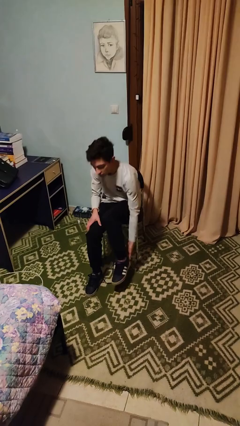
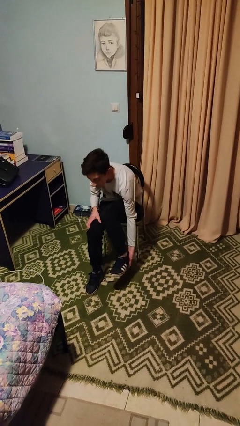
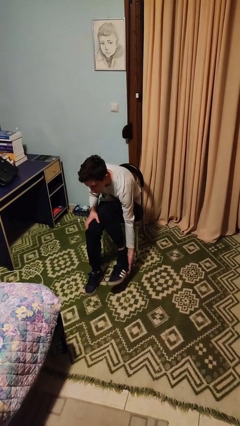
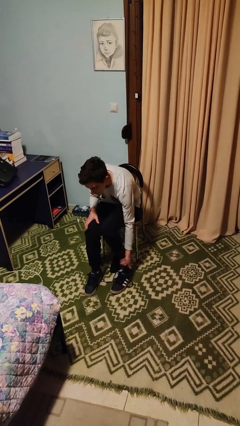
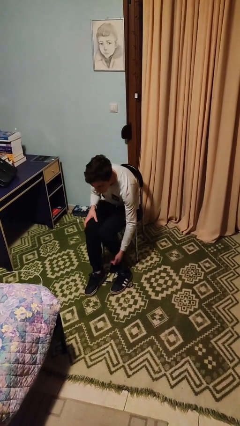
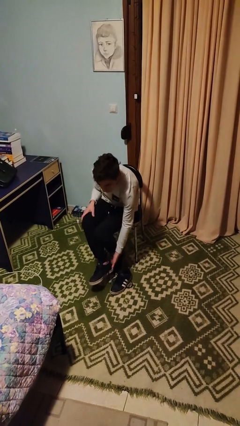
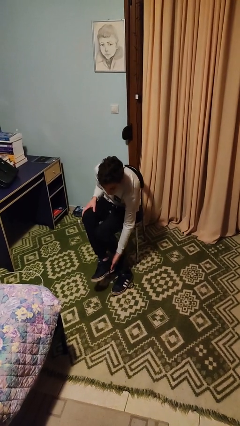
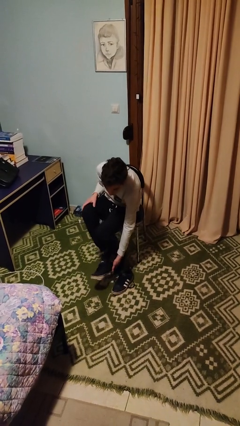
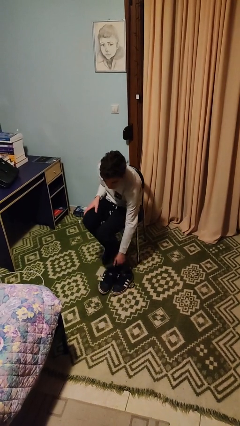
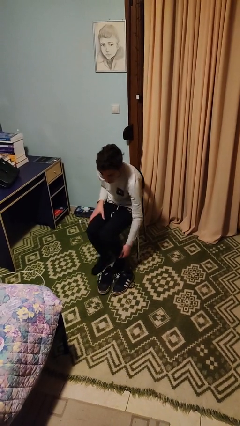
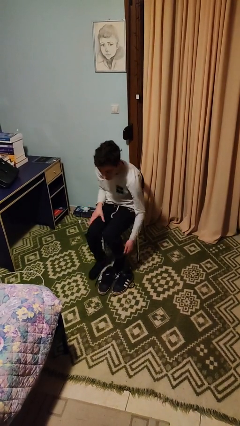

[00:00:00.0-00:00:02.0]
person takes off shoes

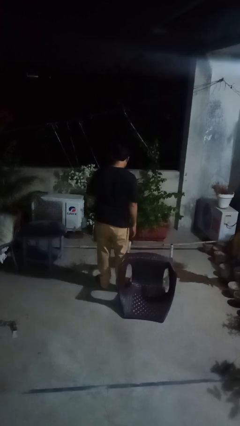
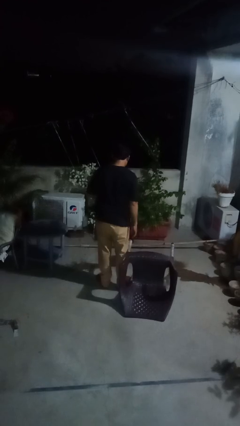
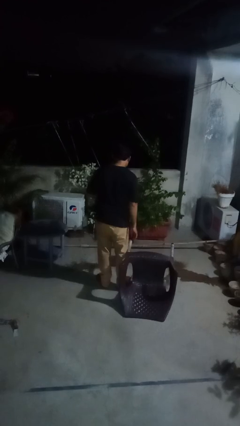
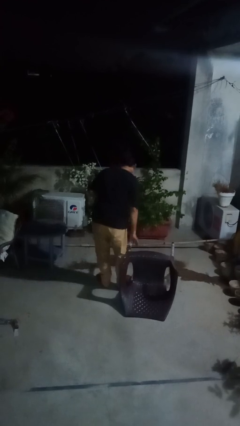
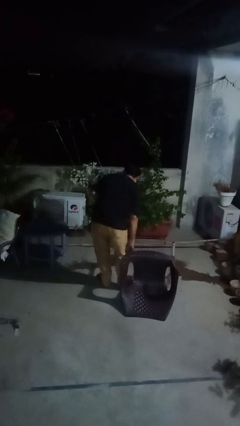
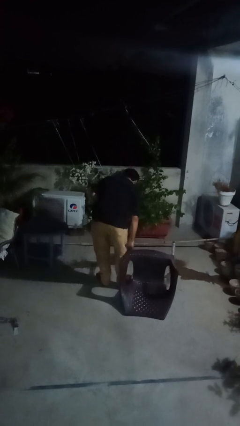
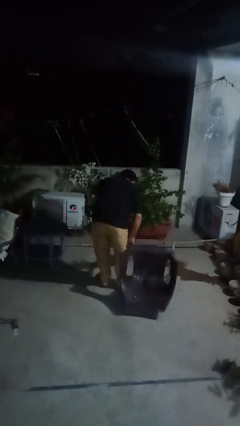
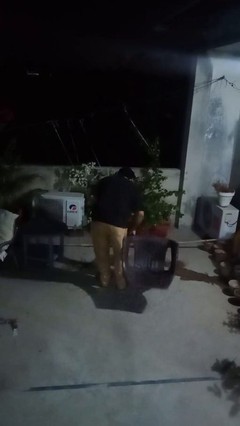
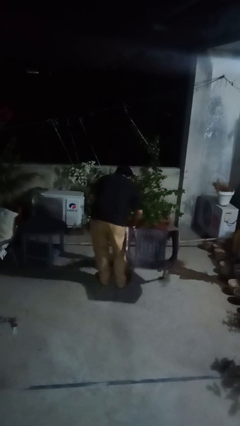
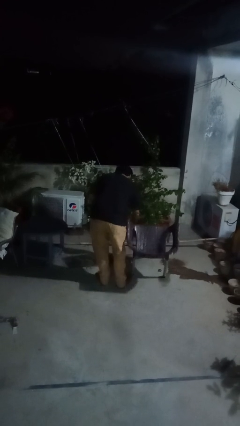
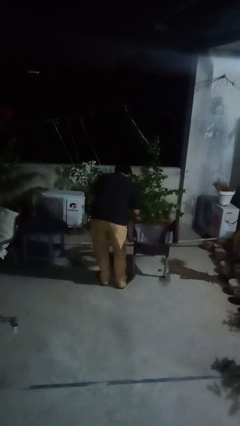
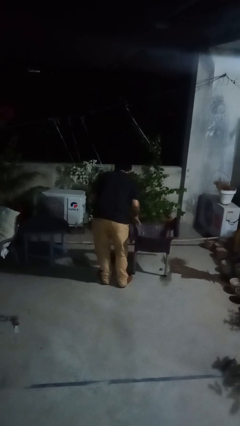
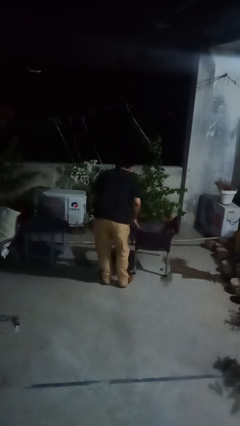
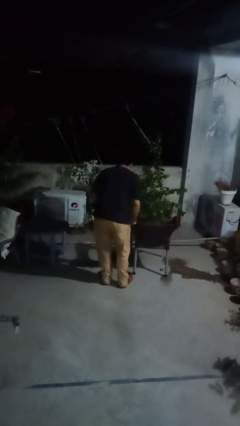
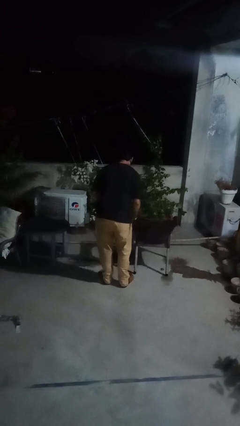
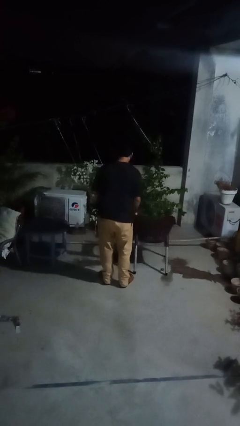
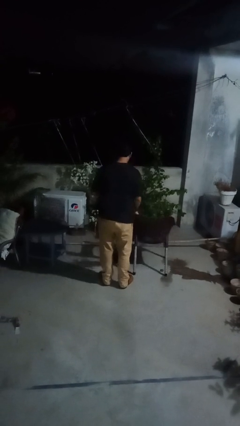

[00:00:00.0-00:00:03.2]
person sets upright furniture

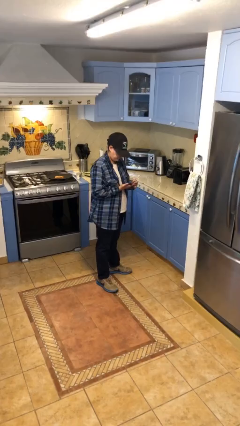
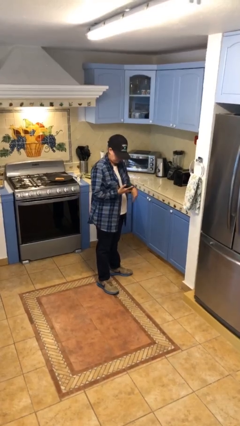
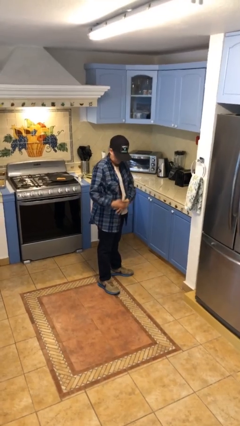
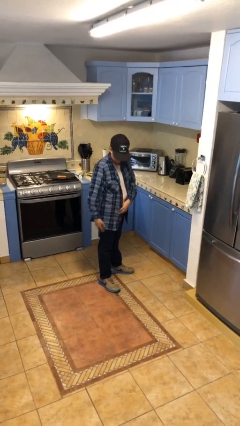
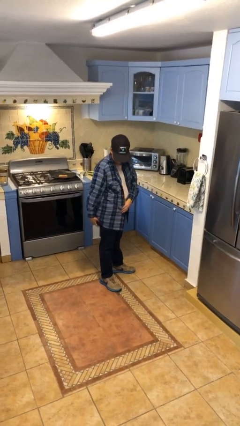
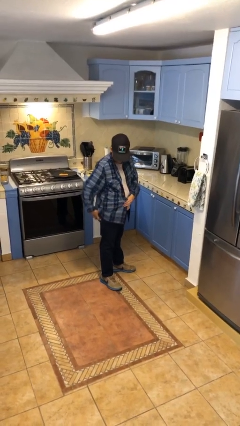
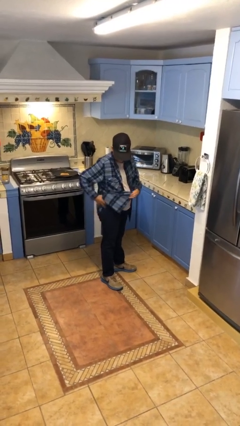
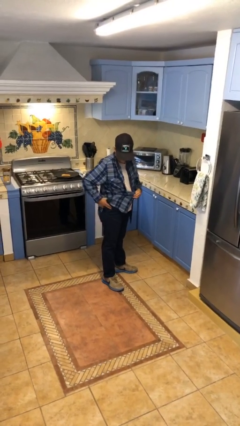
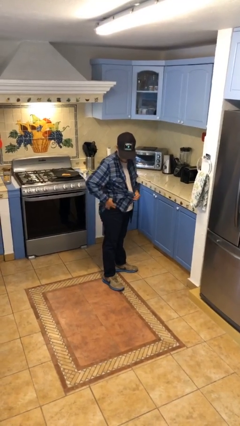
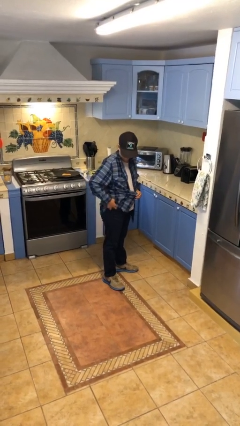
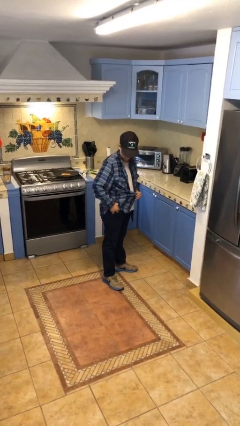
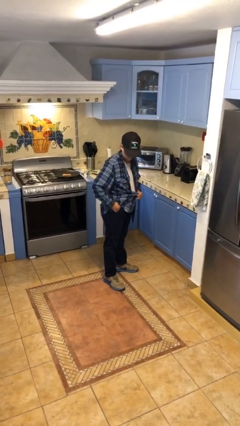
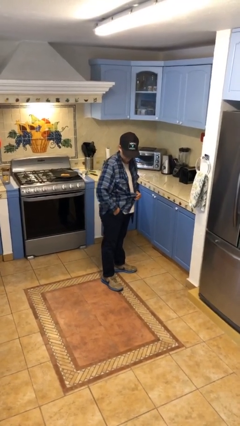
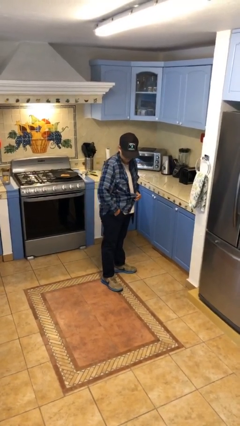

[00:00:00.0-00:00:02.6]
person puts phone into pocket

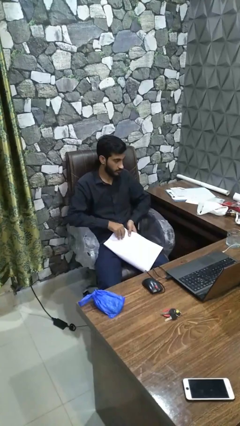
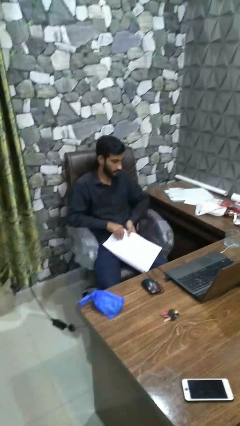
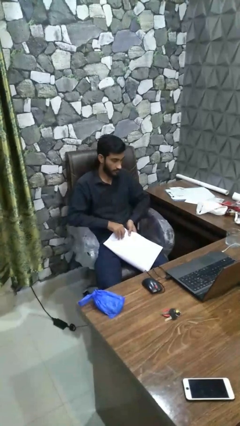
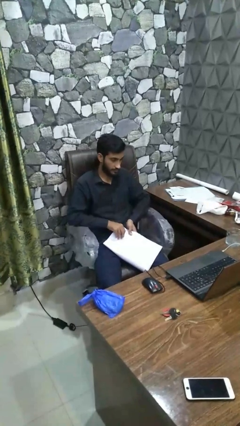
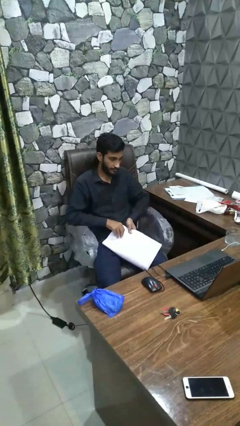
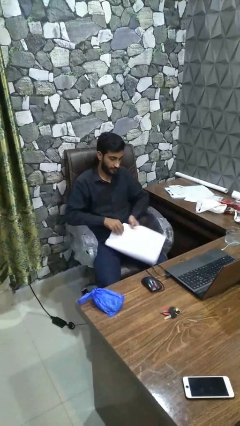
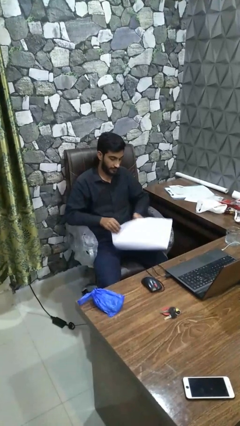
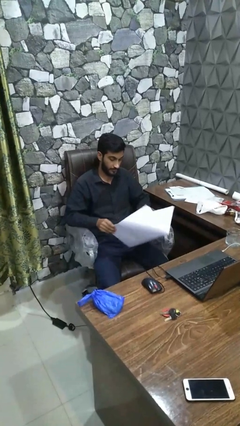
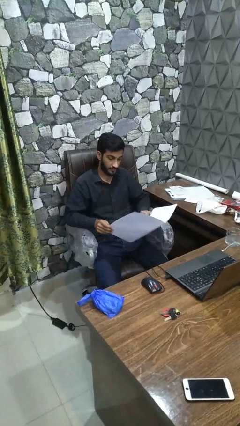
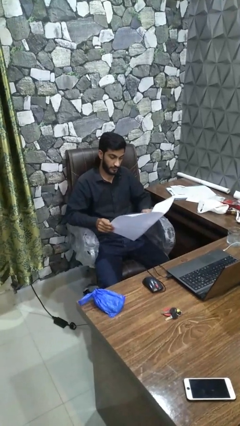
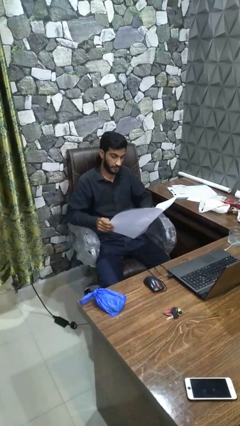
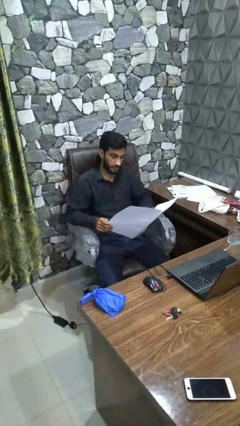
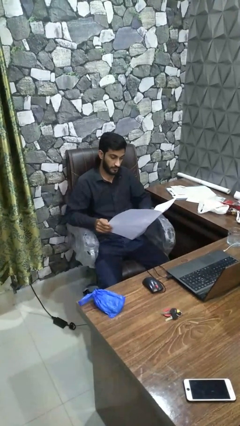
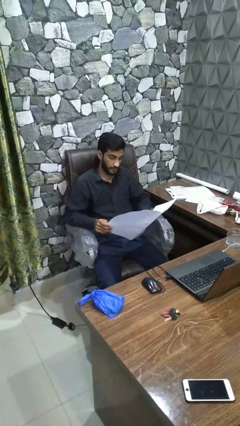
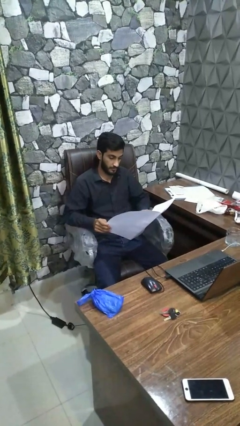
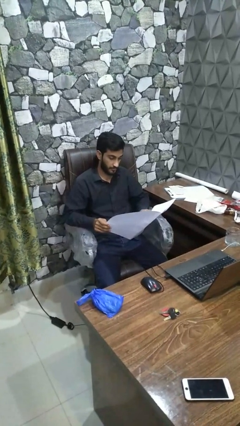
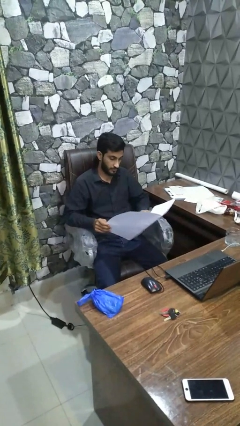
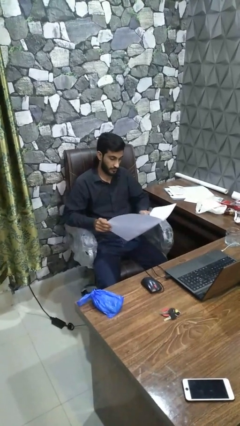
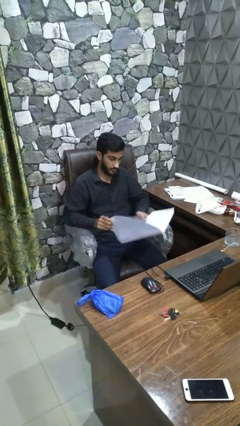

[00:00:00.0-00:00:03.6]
person reads magazine

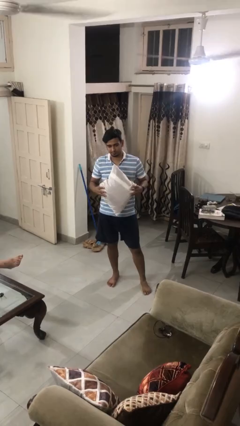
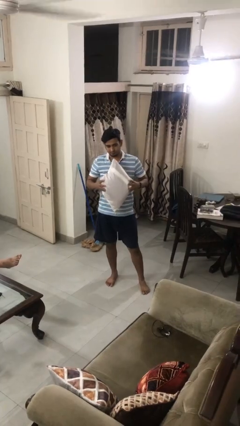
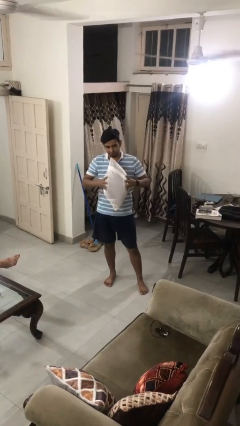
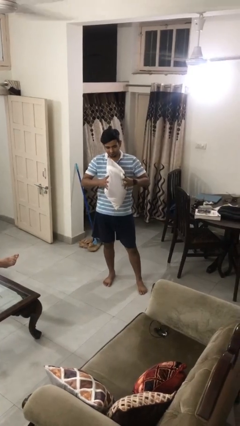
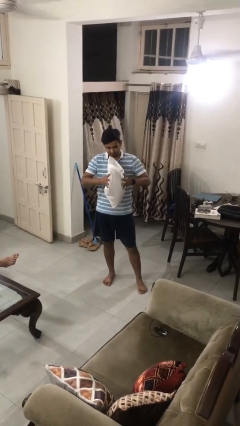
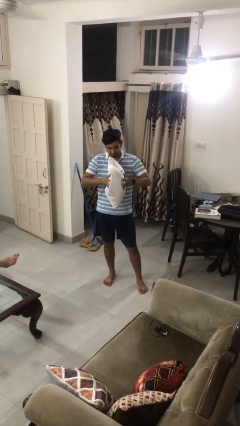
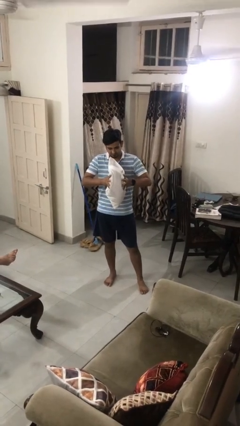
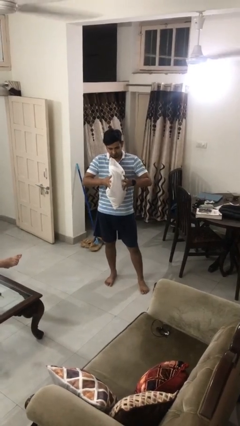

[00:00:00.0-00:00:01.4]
person squeezes object

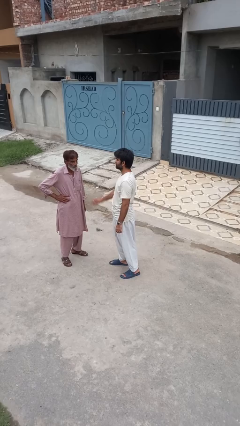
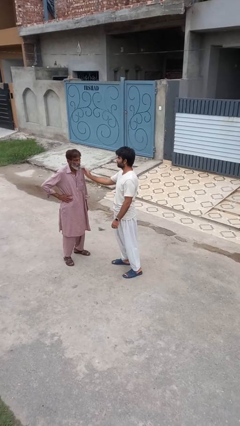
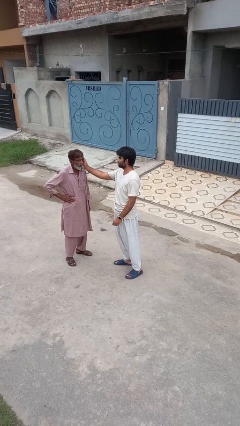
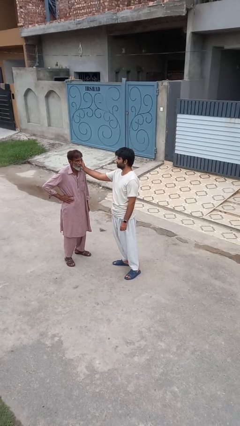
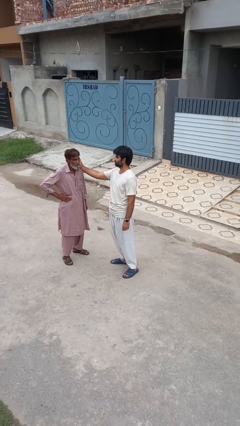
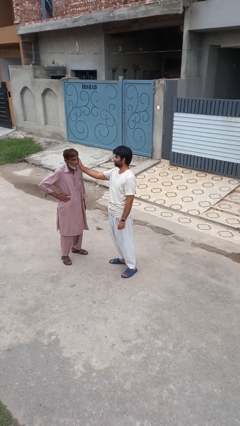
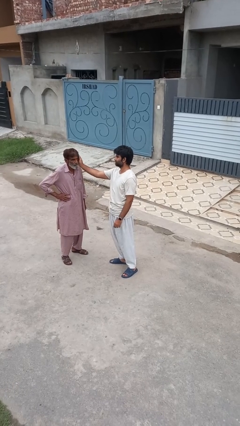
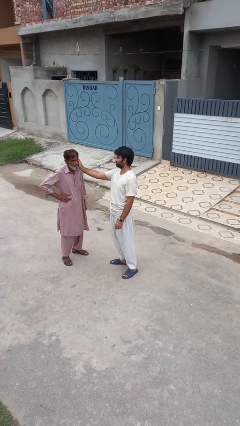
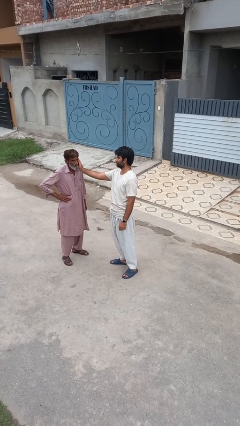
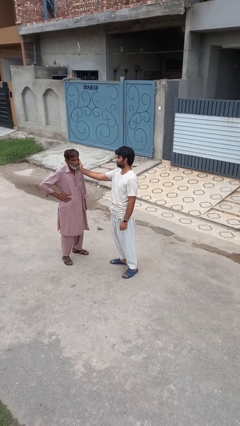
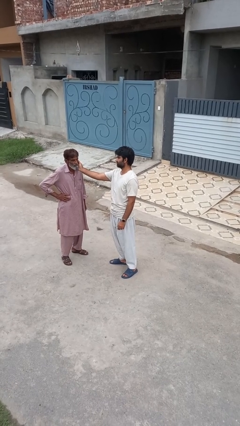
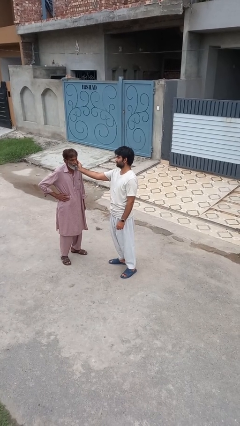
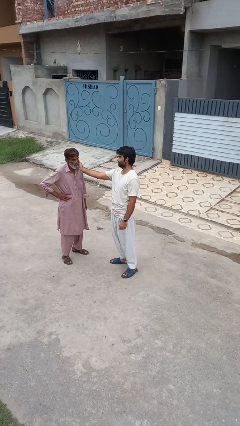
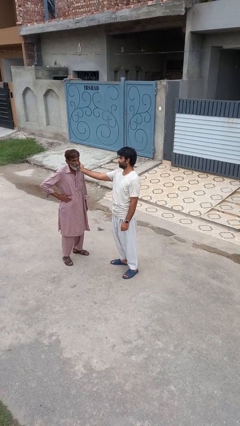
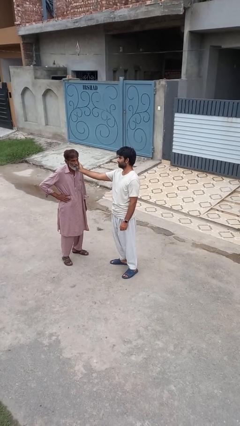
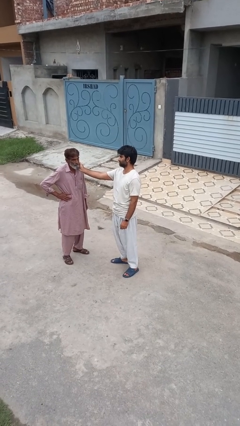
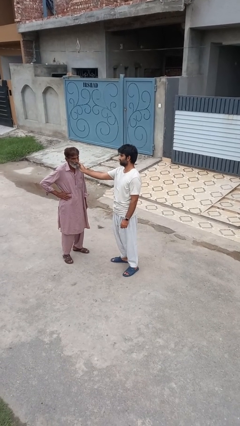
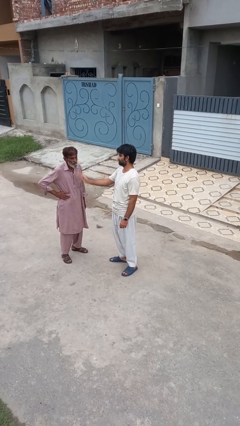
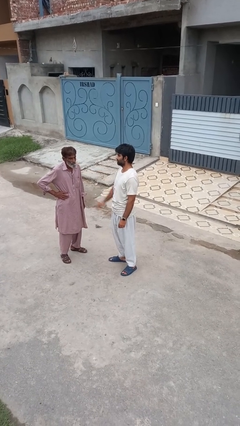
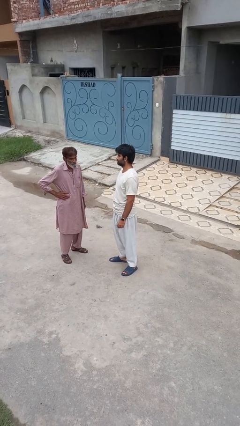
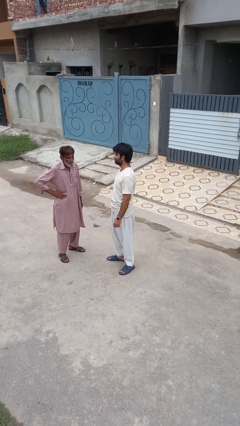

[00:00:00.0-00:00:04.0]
person touches face of person

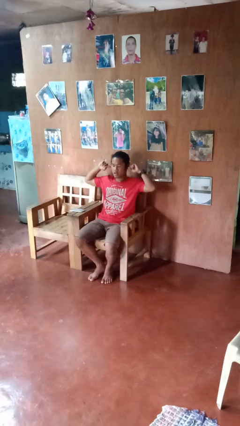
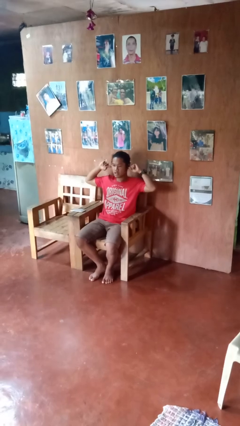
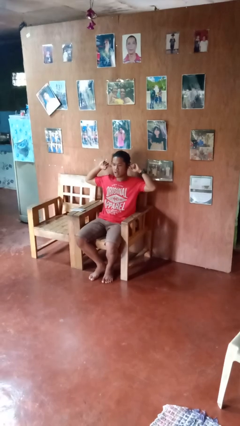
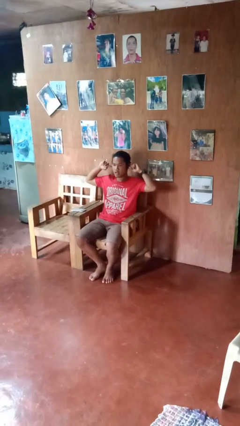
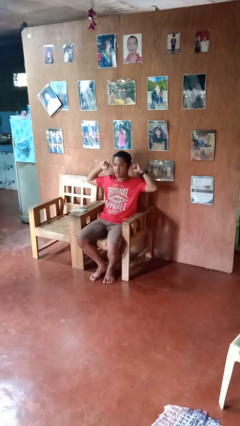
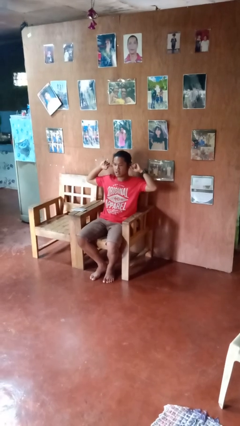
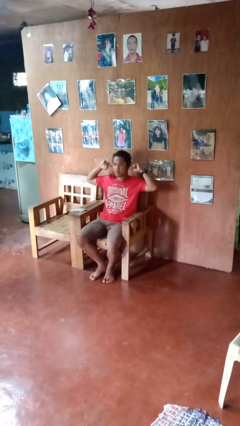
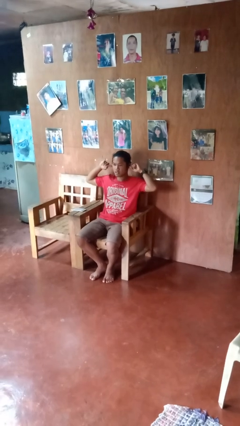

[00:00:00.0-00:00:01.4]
person puts fingers in ear
